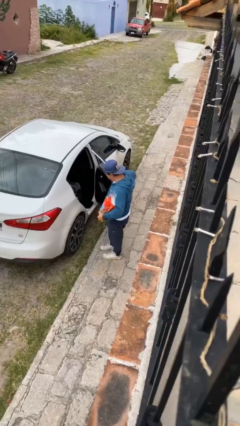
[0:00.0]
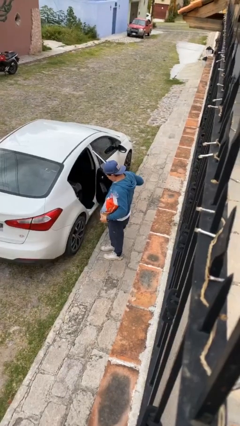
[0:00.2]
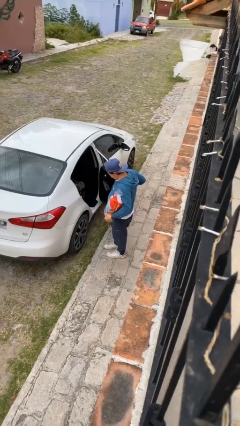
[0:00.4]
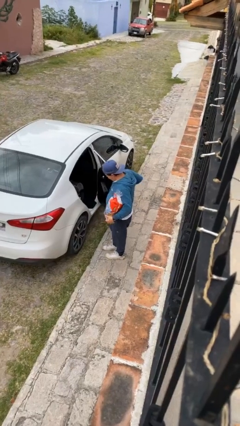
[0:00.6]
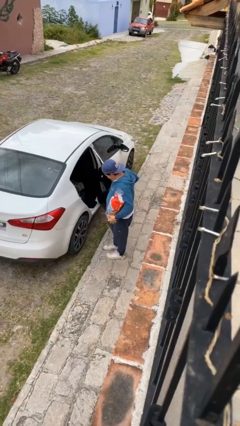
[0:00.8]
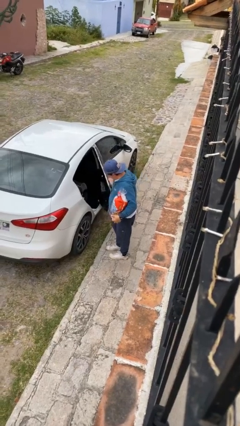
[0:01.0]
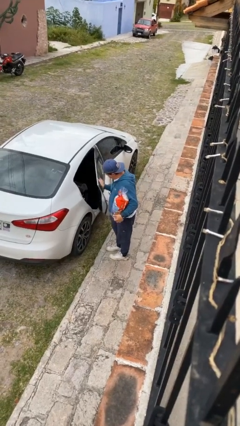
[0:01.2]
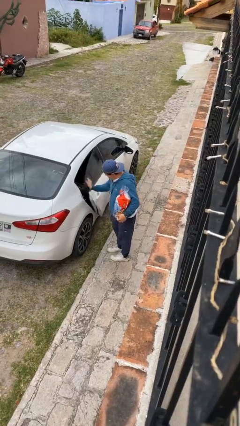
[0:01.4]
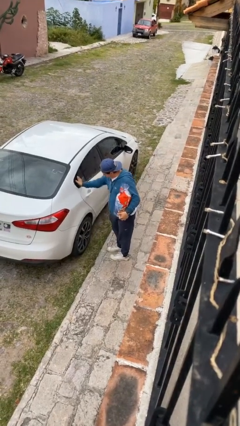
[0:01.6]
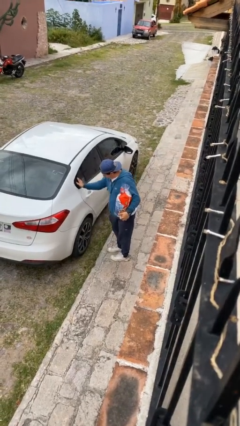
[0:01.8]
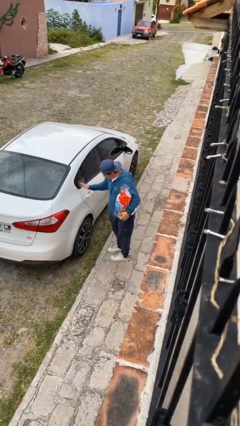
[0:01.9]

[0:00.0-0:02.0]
person closes car door

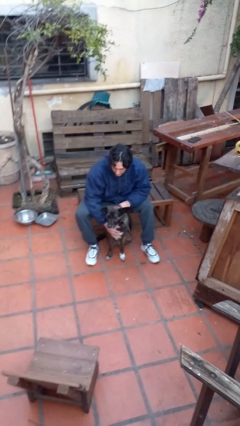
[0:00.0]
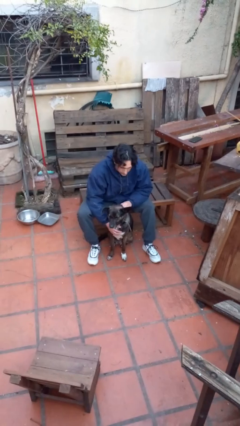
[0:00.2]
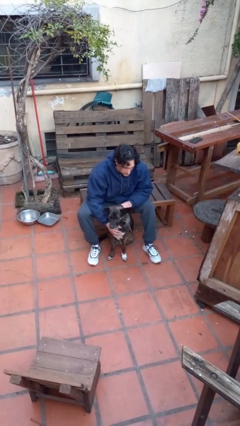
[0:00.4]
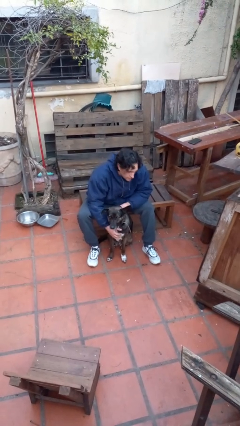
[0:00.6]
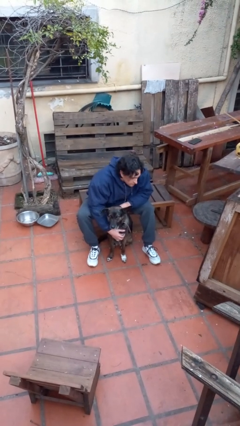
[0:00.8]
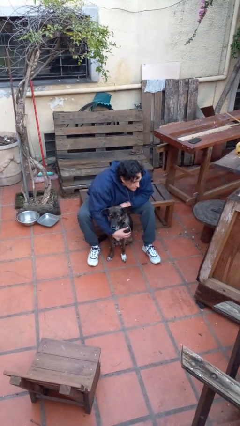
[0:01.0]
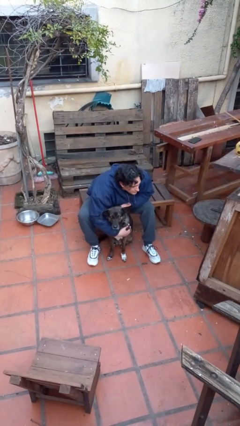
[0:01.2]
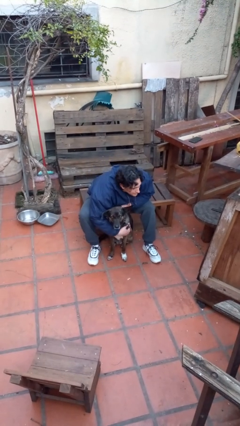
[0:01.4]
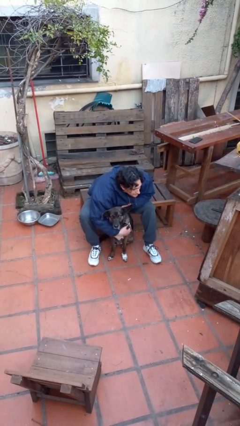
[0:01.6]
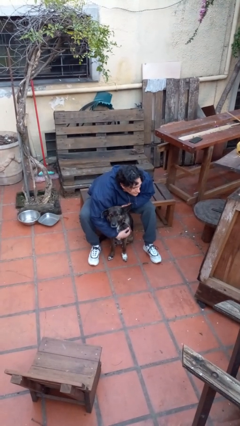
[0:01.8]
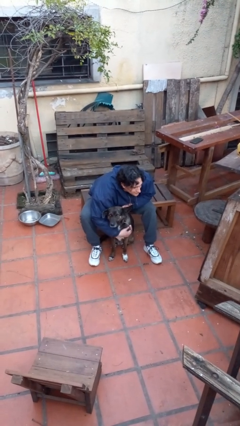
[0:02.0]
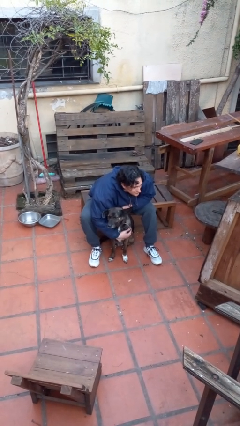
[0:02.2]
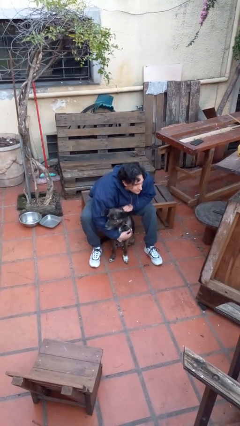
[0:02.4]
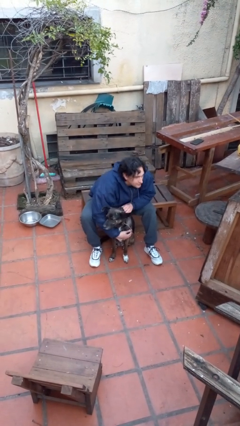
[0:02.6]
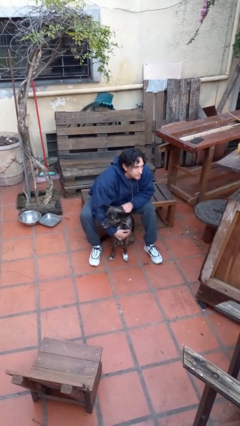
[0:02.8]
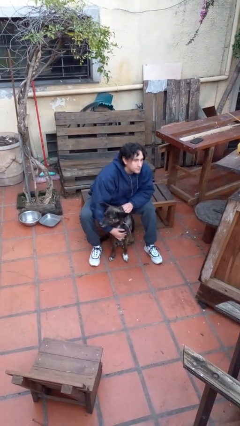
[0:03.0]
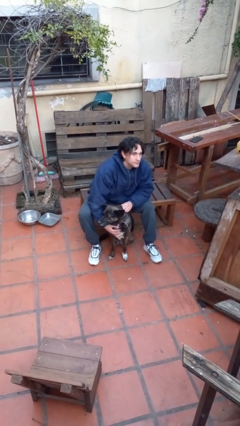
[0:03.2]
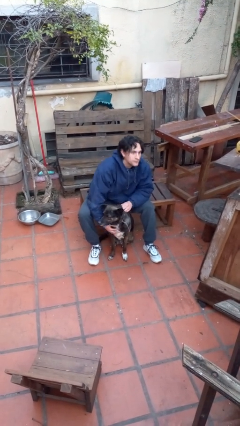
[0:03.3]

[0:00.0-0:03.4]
person hugs dog

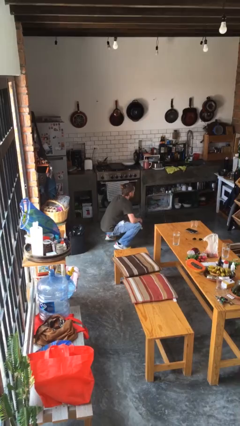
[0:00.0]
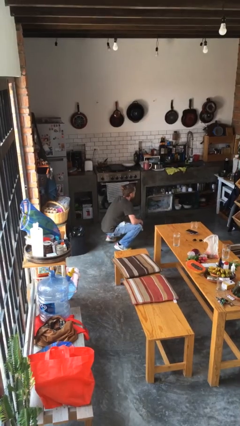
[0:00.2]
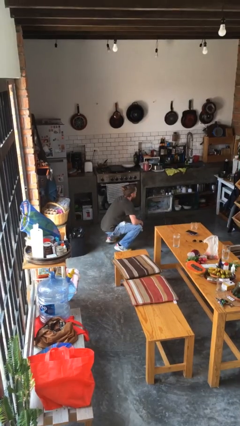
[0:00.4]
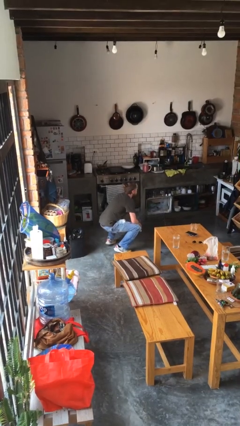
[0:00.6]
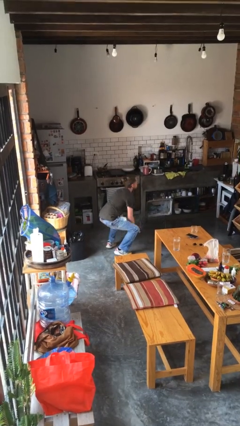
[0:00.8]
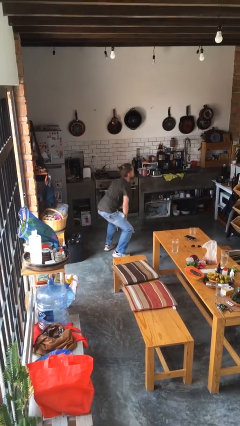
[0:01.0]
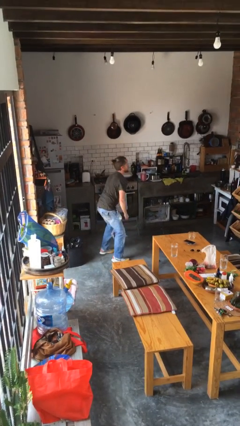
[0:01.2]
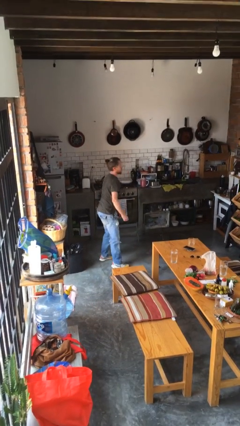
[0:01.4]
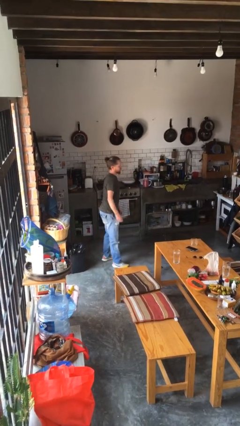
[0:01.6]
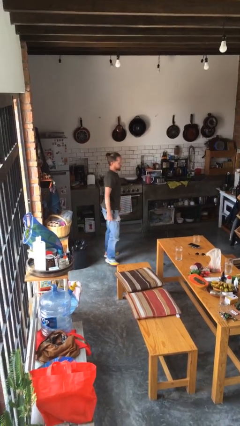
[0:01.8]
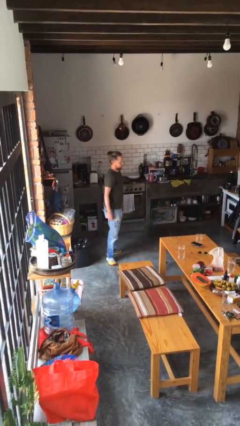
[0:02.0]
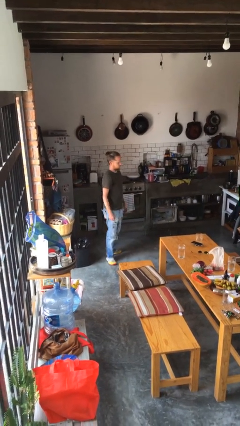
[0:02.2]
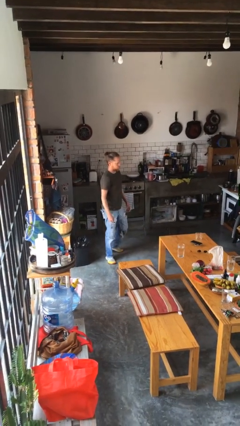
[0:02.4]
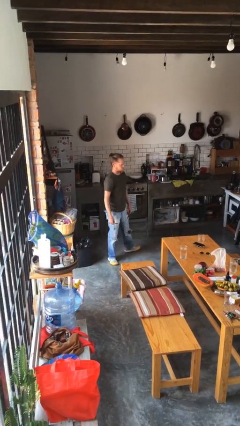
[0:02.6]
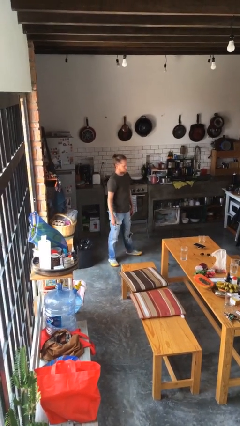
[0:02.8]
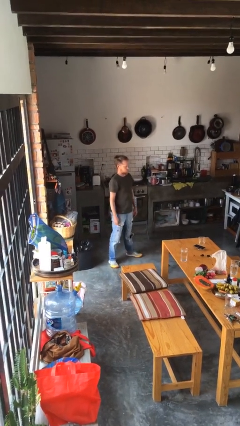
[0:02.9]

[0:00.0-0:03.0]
person stands up

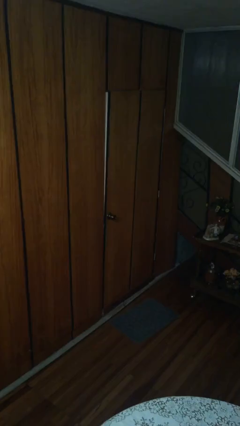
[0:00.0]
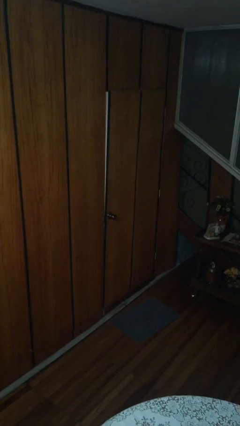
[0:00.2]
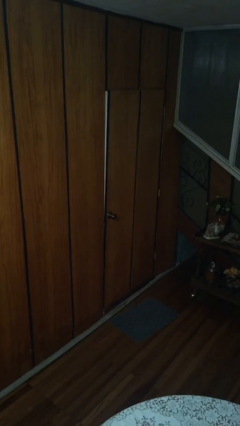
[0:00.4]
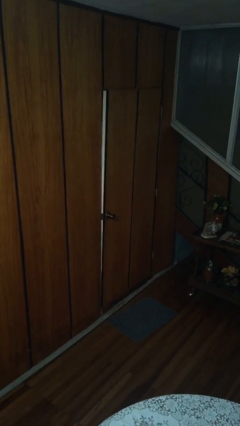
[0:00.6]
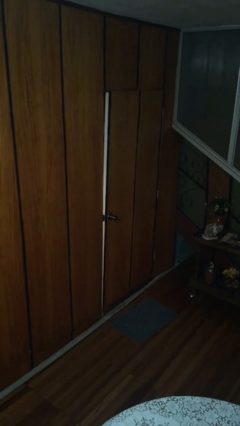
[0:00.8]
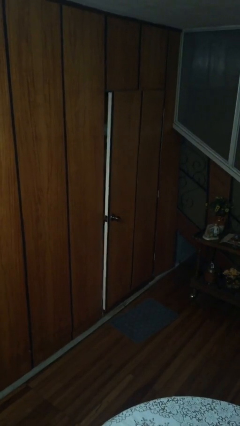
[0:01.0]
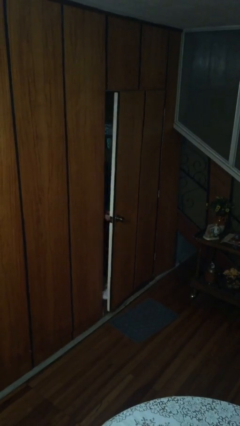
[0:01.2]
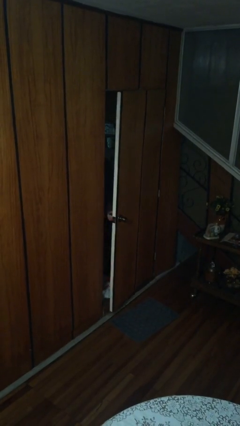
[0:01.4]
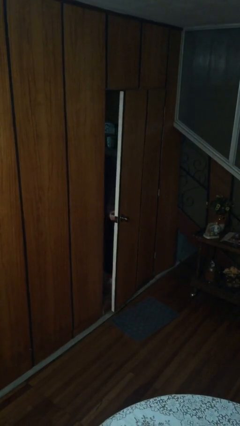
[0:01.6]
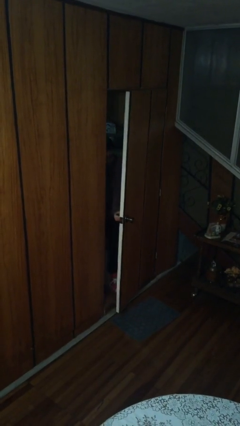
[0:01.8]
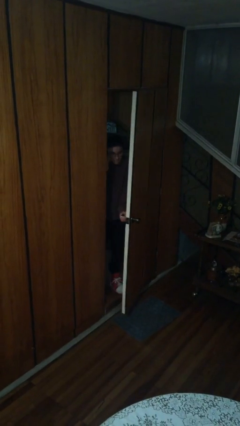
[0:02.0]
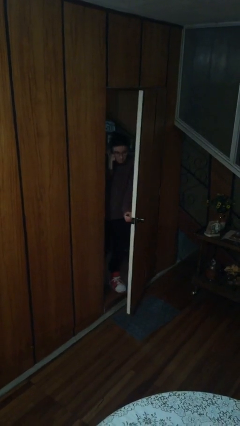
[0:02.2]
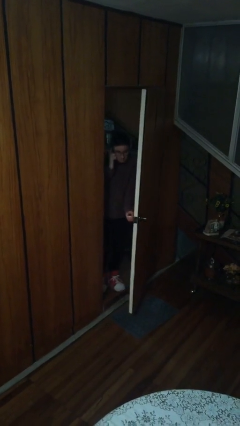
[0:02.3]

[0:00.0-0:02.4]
person opens facility door

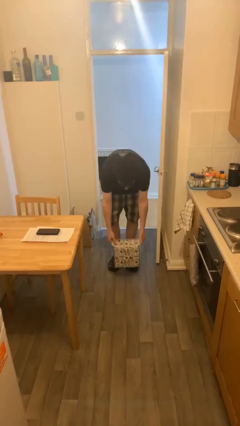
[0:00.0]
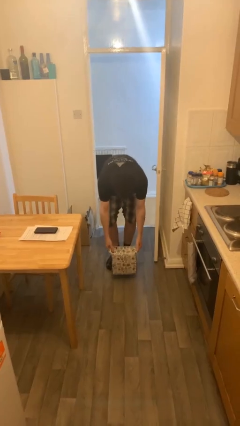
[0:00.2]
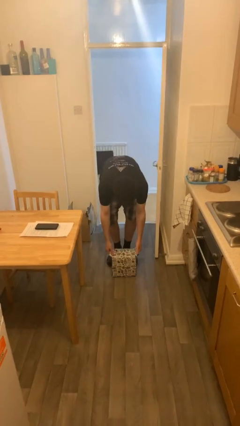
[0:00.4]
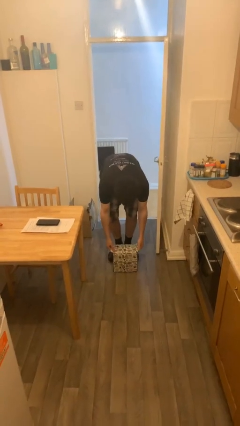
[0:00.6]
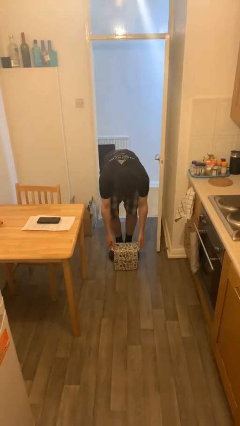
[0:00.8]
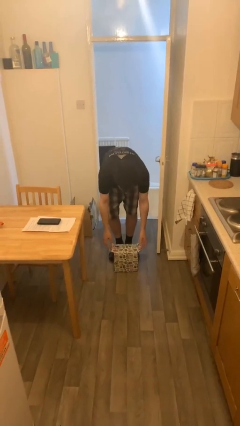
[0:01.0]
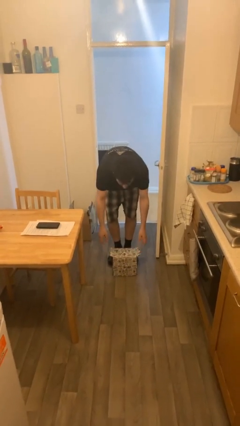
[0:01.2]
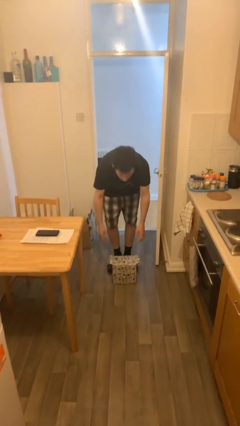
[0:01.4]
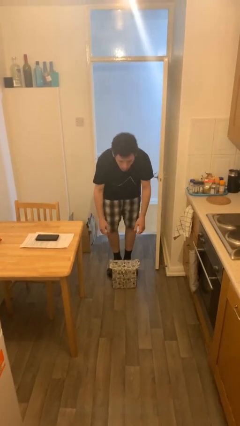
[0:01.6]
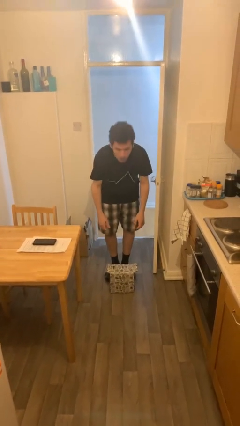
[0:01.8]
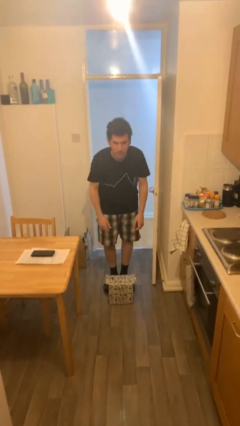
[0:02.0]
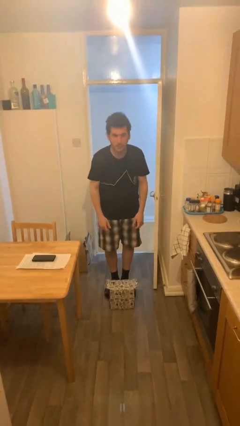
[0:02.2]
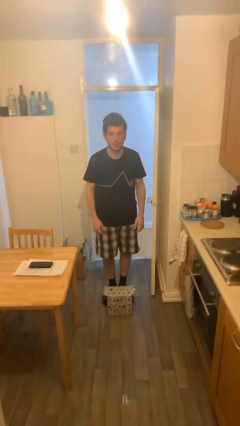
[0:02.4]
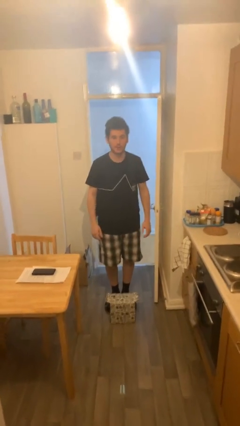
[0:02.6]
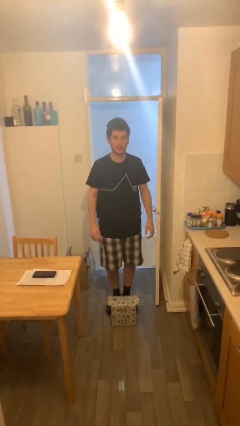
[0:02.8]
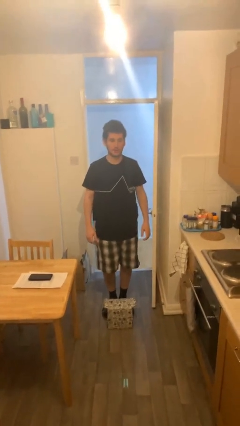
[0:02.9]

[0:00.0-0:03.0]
person puts down object on floor

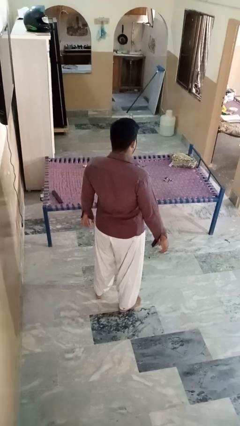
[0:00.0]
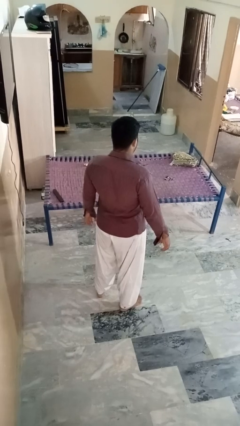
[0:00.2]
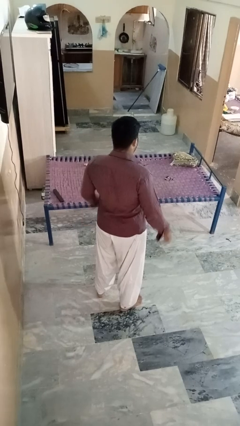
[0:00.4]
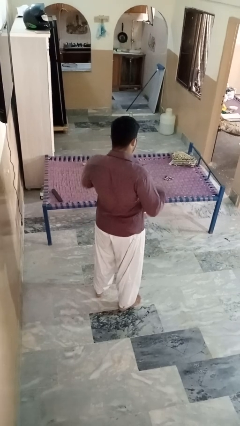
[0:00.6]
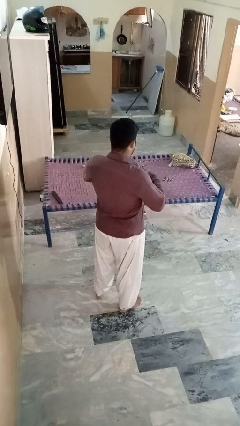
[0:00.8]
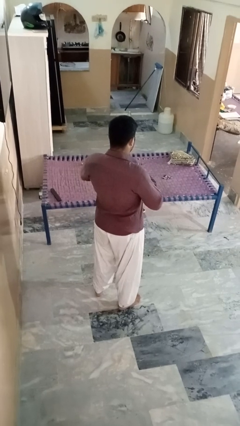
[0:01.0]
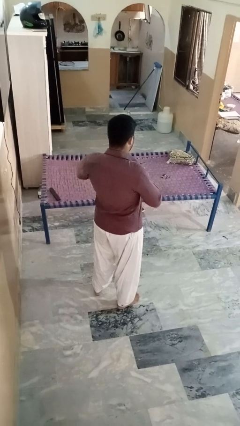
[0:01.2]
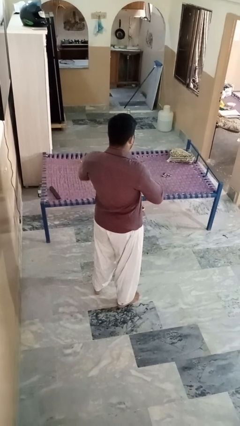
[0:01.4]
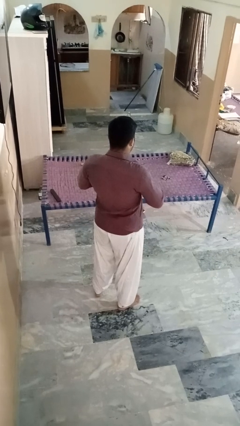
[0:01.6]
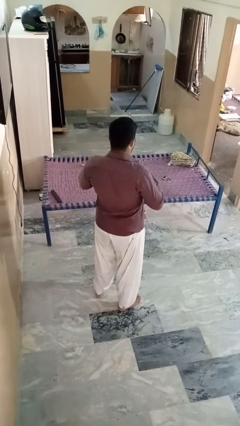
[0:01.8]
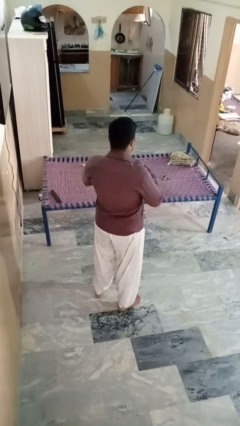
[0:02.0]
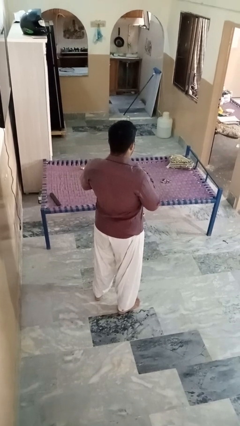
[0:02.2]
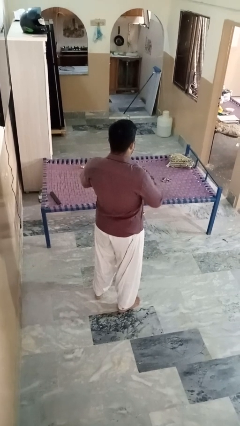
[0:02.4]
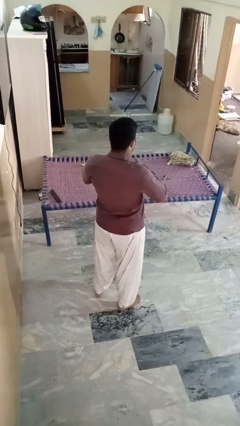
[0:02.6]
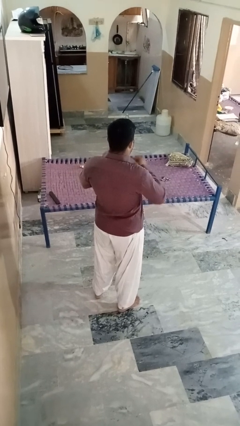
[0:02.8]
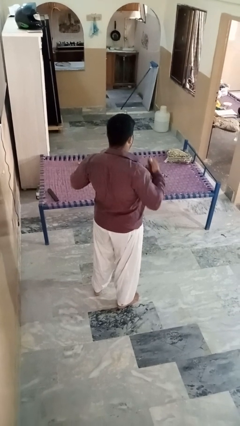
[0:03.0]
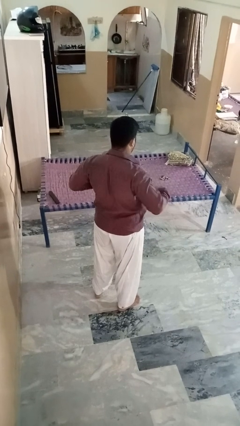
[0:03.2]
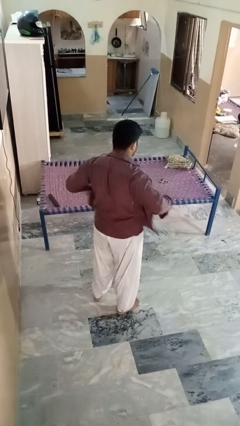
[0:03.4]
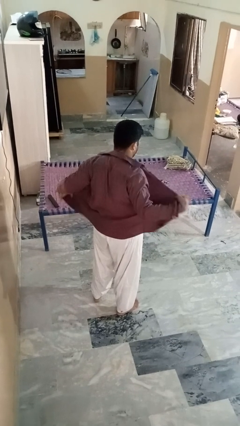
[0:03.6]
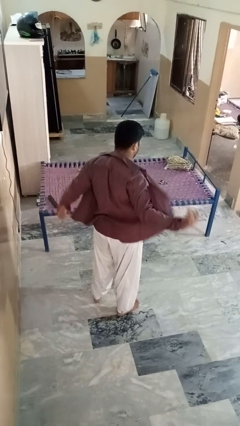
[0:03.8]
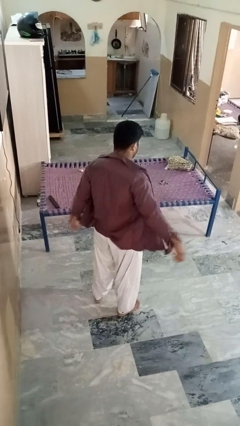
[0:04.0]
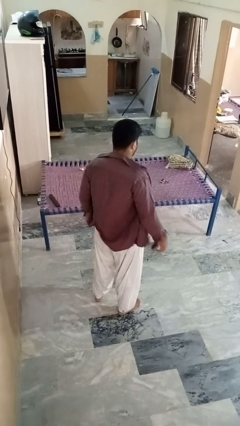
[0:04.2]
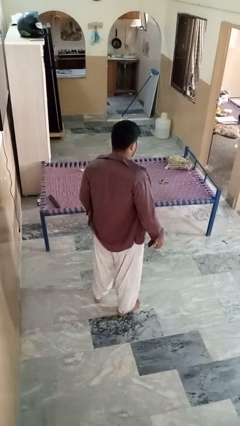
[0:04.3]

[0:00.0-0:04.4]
person unbuttons shirt
